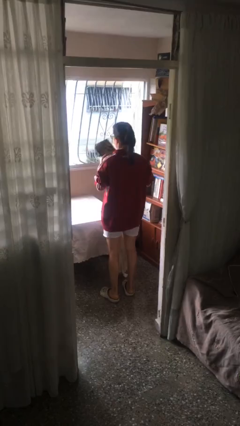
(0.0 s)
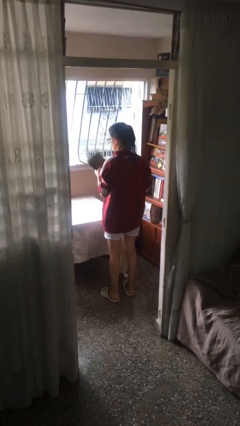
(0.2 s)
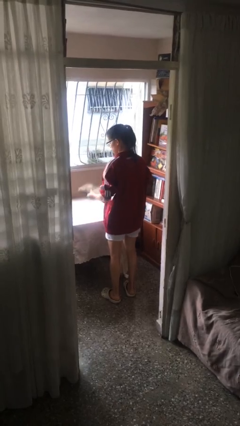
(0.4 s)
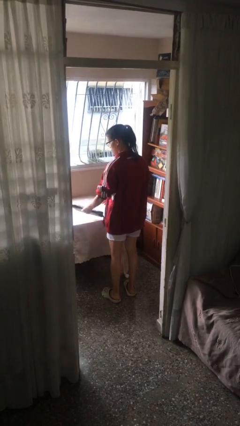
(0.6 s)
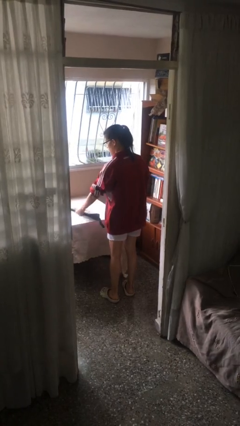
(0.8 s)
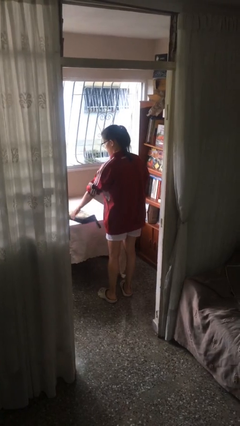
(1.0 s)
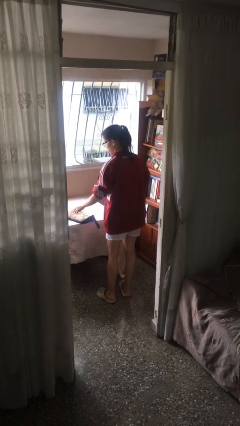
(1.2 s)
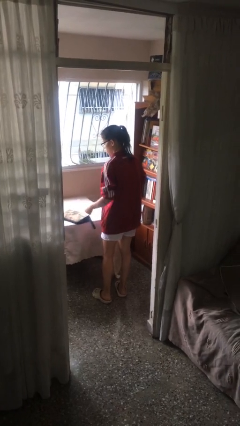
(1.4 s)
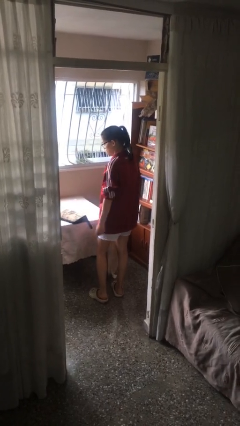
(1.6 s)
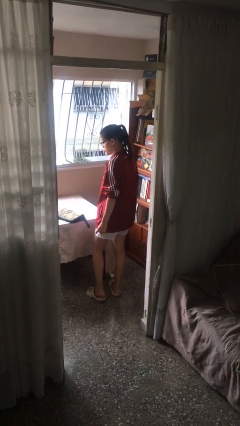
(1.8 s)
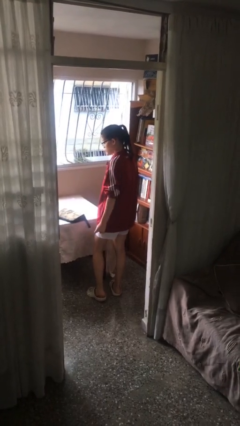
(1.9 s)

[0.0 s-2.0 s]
person puts down object on table

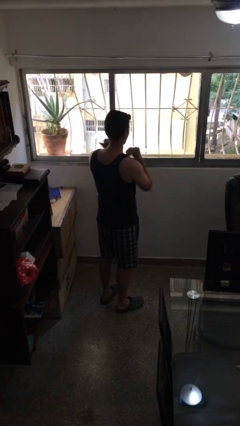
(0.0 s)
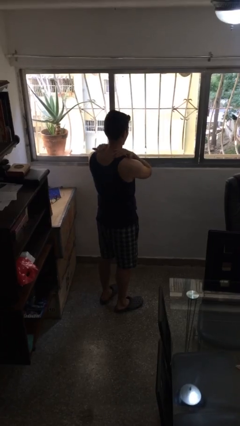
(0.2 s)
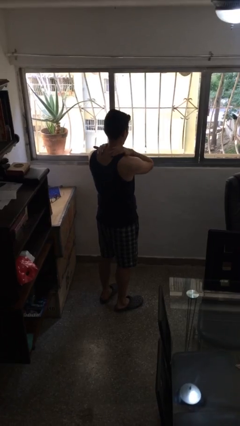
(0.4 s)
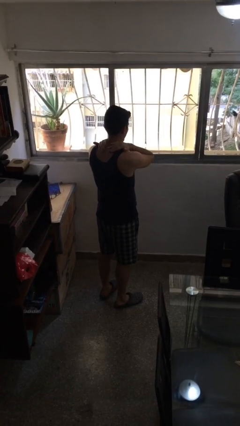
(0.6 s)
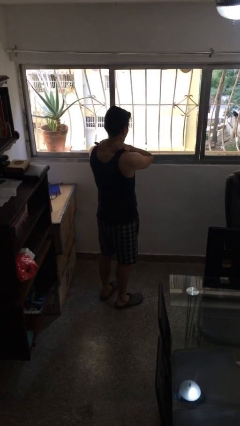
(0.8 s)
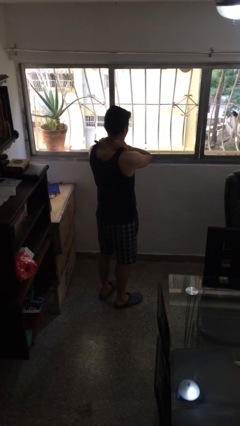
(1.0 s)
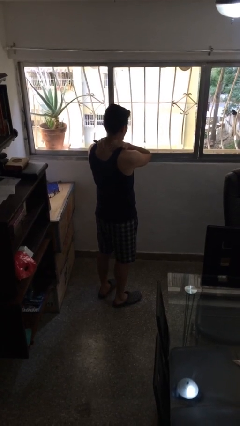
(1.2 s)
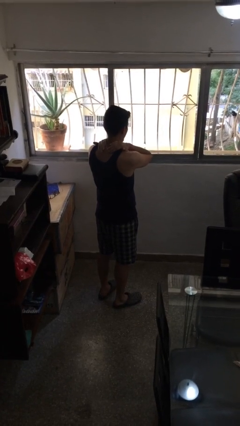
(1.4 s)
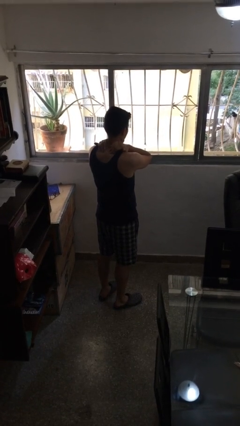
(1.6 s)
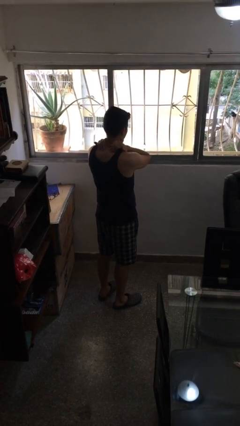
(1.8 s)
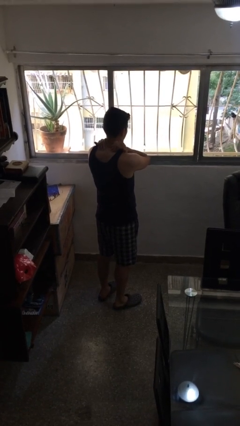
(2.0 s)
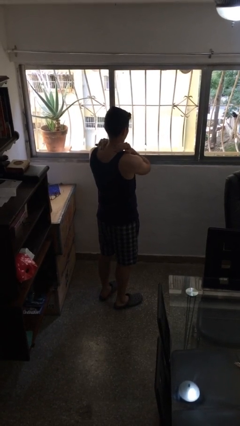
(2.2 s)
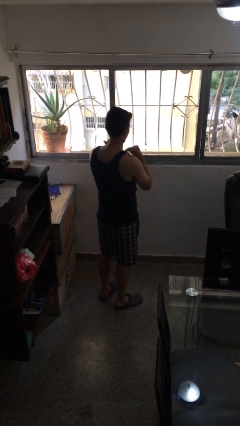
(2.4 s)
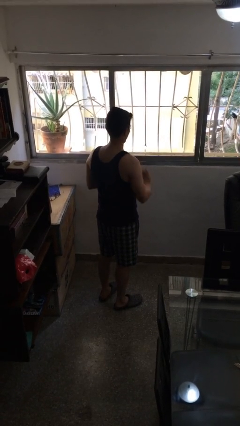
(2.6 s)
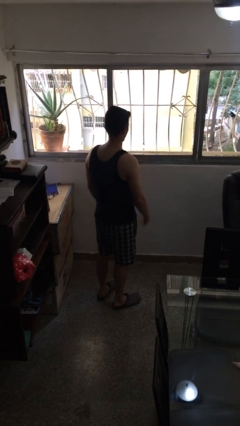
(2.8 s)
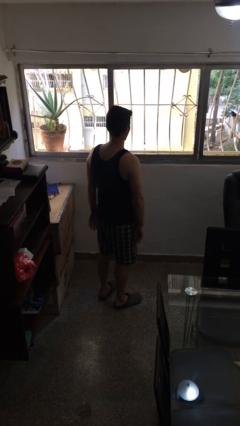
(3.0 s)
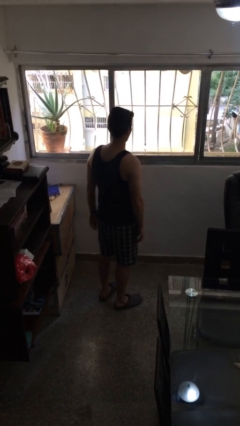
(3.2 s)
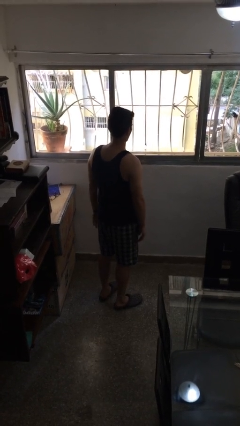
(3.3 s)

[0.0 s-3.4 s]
person rubs neck

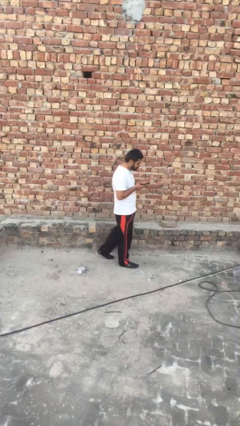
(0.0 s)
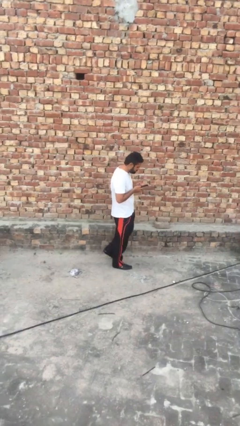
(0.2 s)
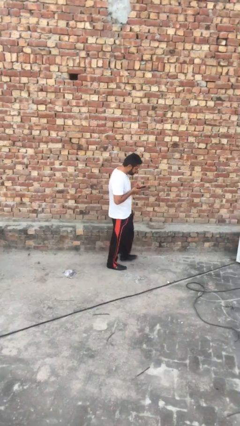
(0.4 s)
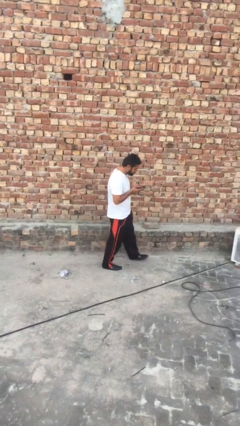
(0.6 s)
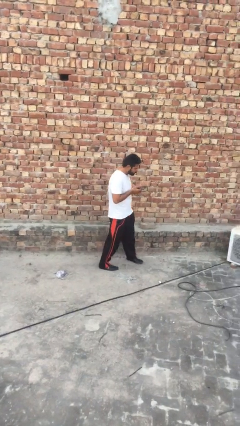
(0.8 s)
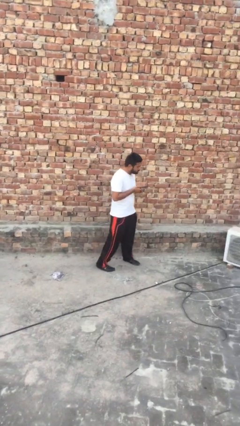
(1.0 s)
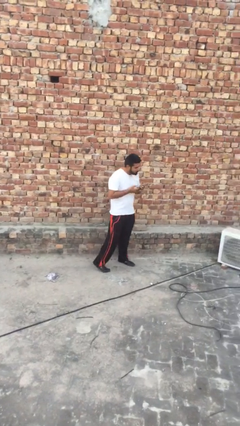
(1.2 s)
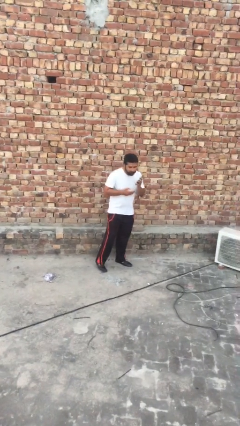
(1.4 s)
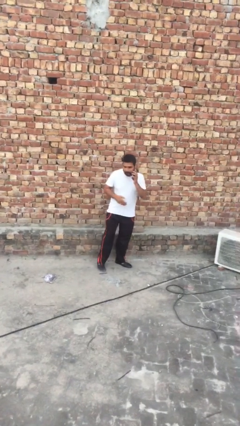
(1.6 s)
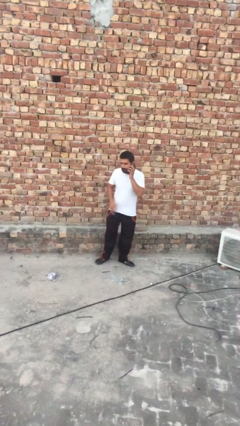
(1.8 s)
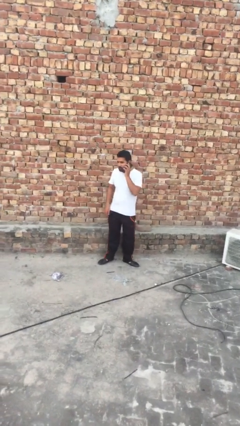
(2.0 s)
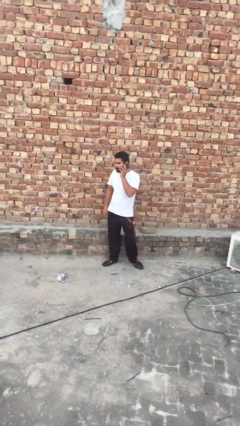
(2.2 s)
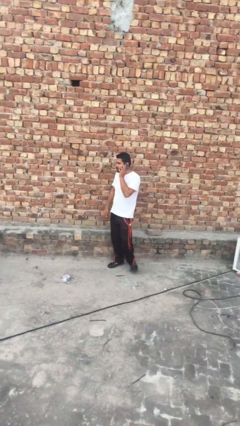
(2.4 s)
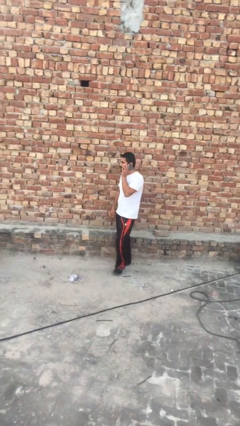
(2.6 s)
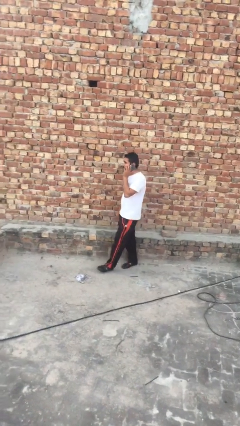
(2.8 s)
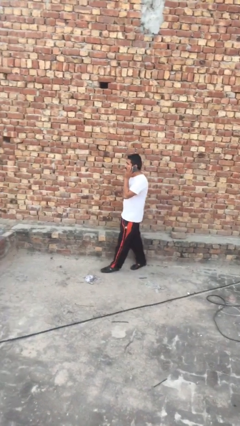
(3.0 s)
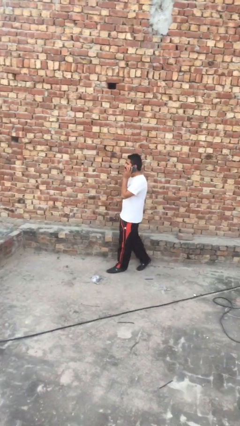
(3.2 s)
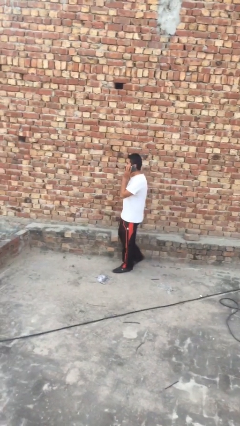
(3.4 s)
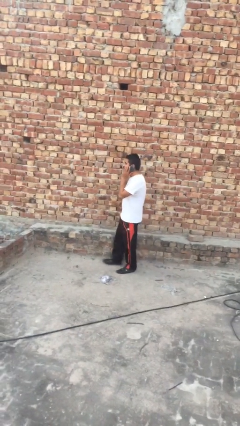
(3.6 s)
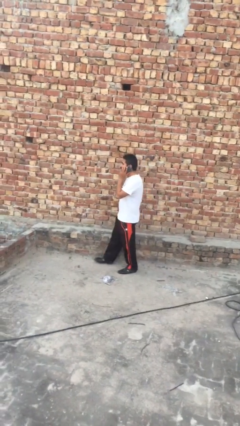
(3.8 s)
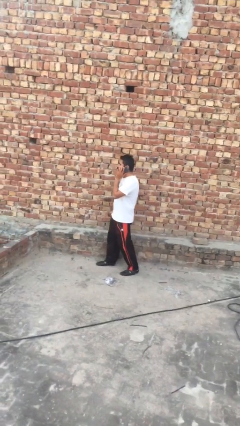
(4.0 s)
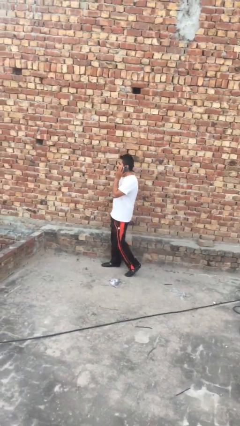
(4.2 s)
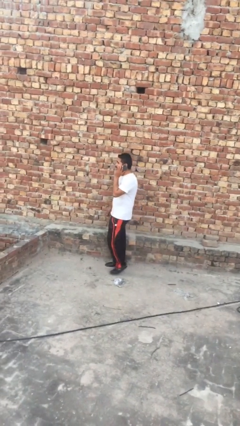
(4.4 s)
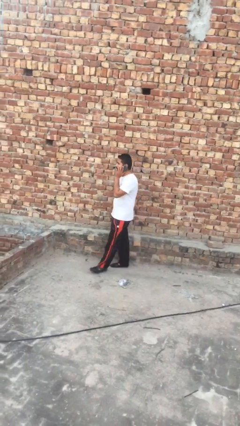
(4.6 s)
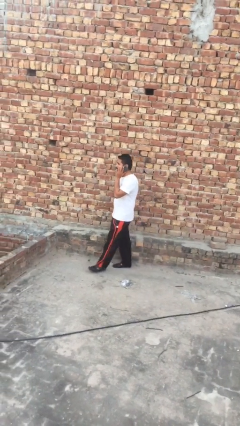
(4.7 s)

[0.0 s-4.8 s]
person talks on phone

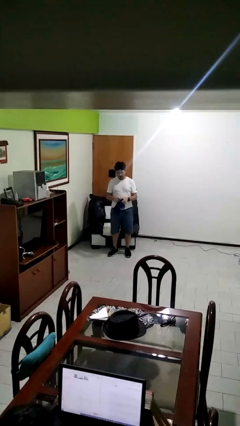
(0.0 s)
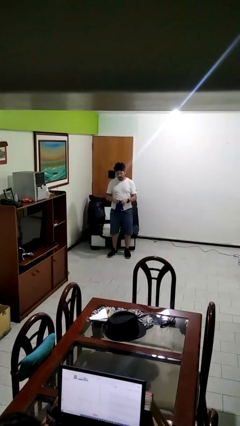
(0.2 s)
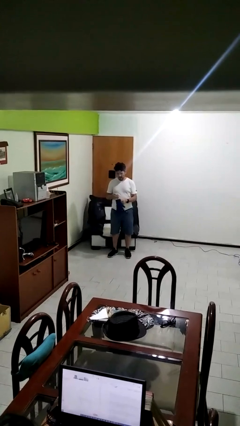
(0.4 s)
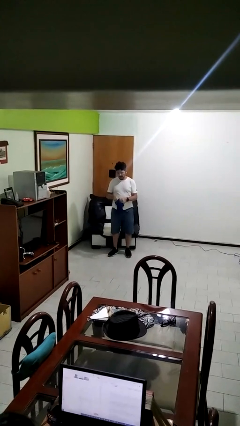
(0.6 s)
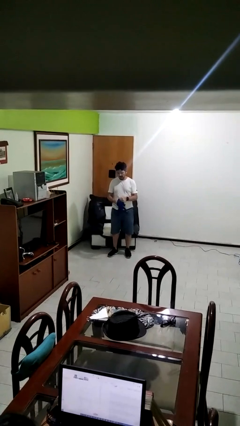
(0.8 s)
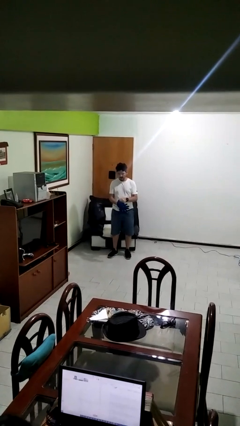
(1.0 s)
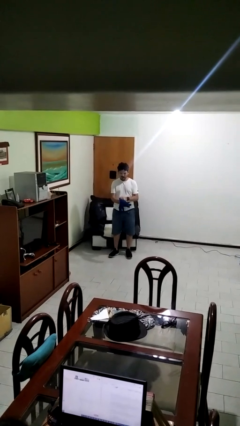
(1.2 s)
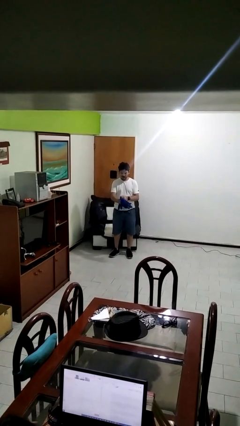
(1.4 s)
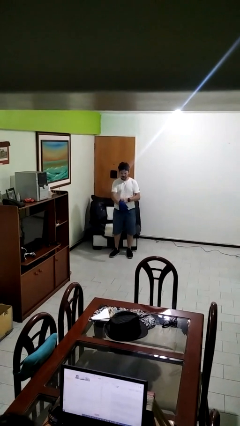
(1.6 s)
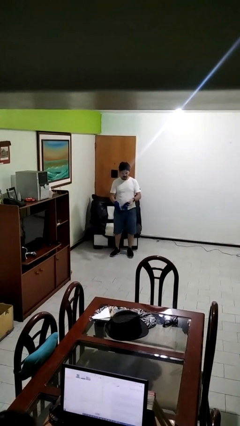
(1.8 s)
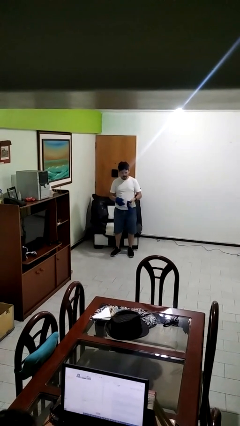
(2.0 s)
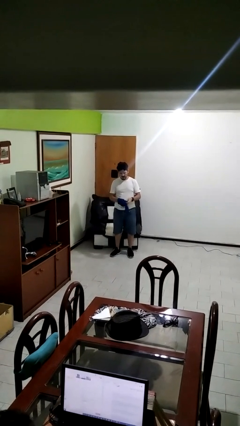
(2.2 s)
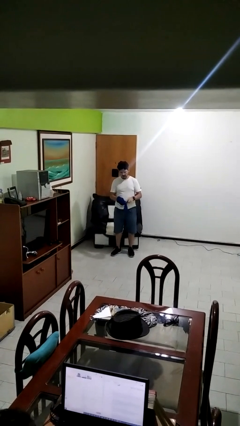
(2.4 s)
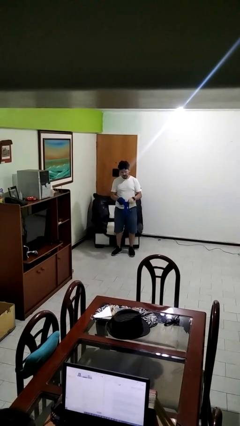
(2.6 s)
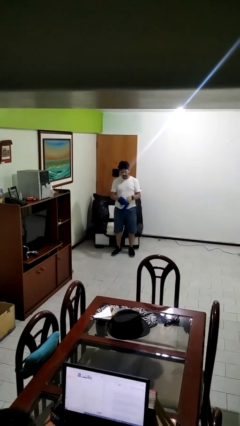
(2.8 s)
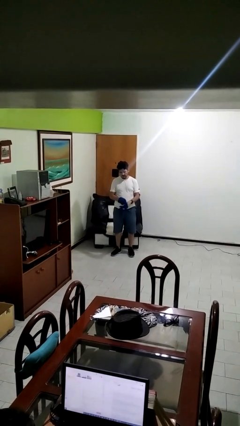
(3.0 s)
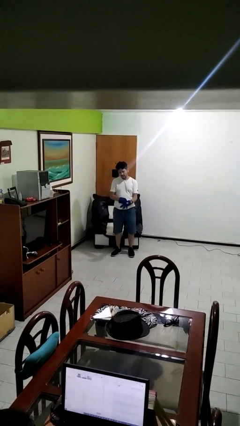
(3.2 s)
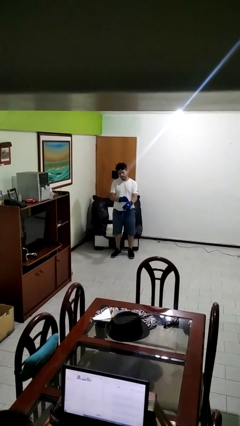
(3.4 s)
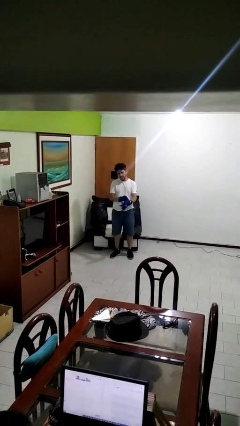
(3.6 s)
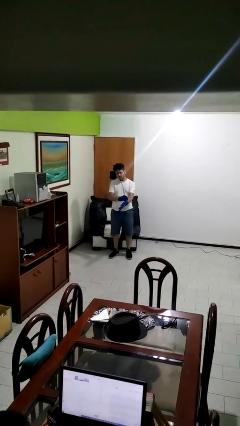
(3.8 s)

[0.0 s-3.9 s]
person puts on gloves

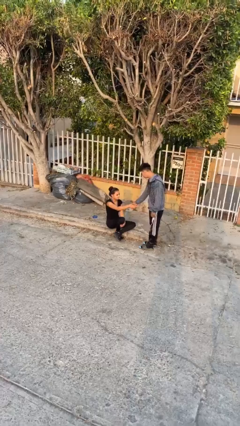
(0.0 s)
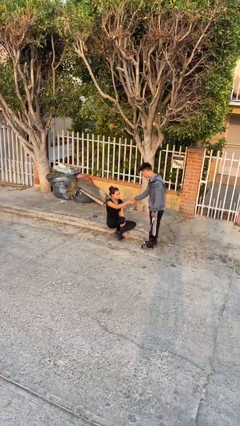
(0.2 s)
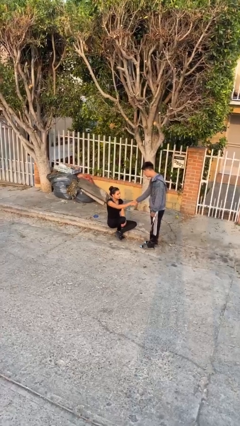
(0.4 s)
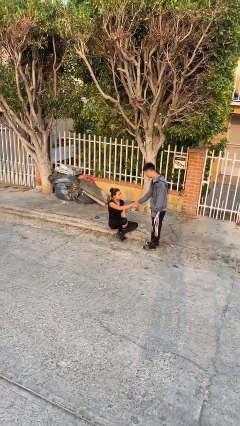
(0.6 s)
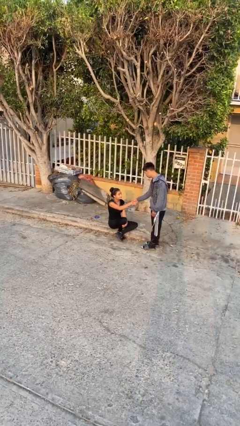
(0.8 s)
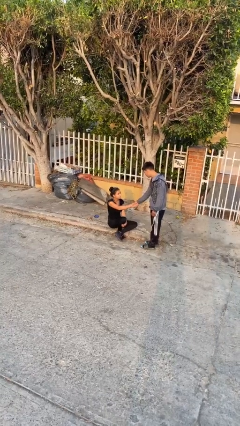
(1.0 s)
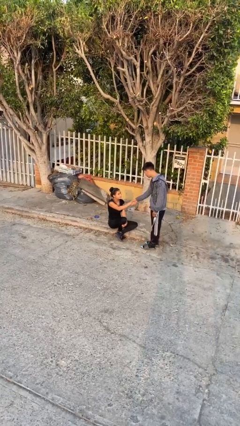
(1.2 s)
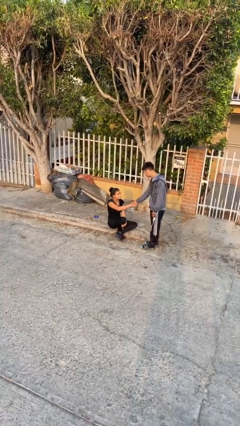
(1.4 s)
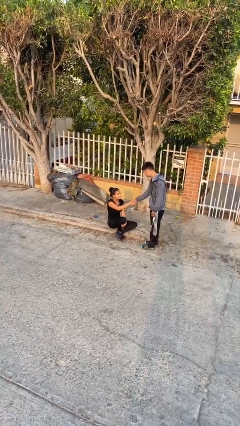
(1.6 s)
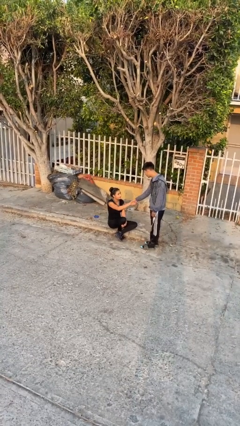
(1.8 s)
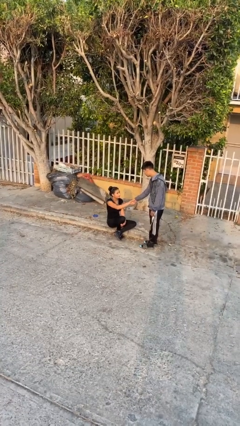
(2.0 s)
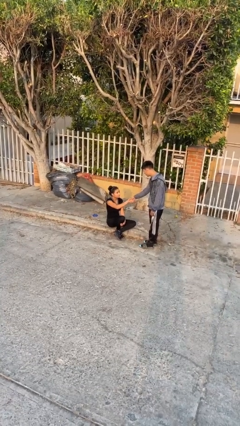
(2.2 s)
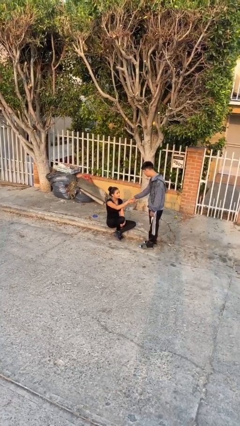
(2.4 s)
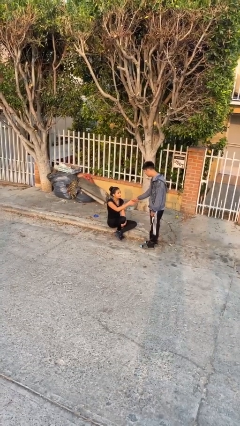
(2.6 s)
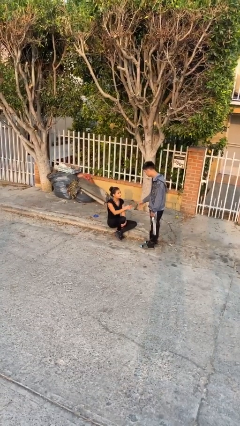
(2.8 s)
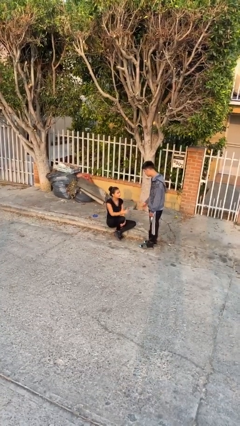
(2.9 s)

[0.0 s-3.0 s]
person shakes hand

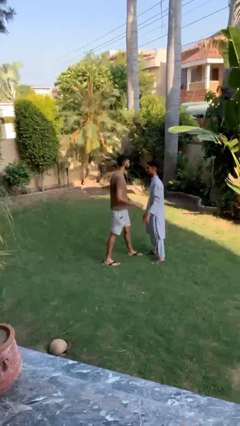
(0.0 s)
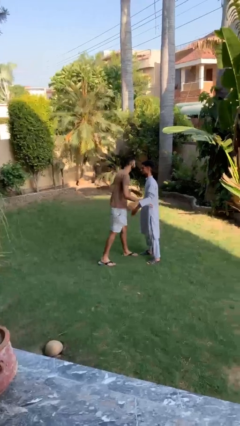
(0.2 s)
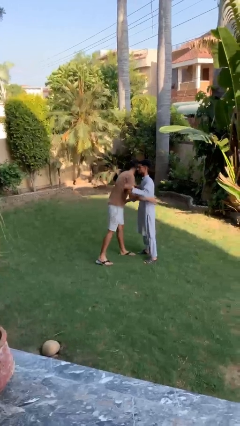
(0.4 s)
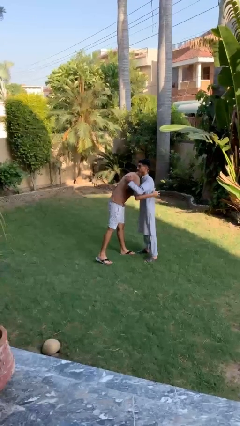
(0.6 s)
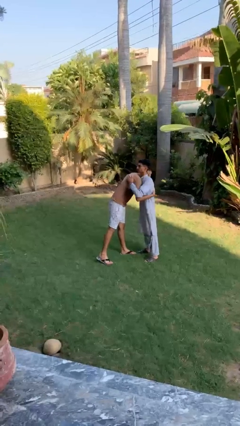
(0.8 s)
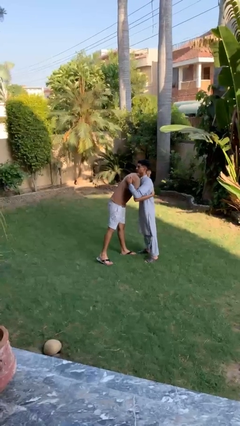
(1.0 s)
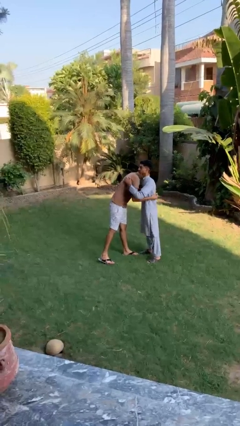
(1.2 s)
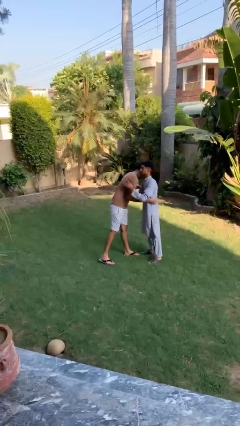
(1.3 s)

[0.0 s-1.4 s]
person embraces person
